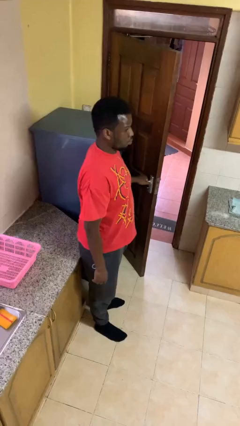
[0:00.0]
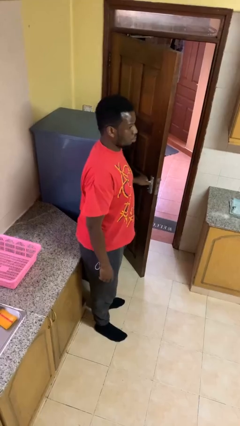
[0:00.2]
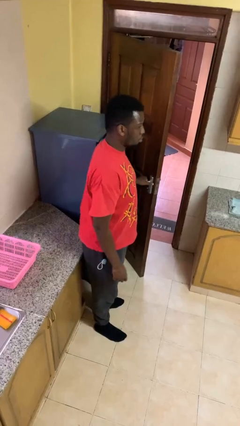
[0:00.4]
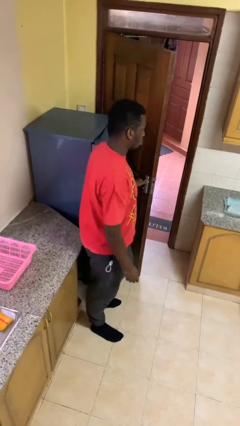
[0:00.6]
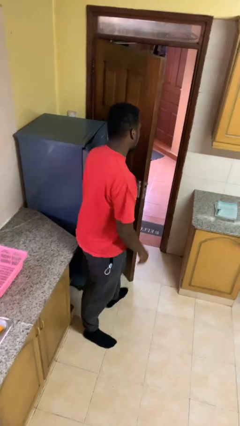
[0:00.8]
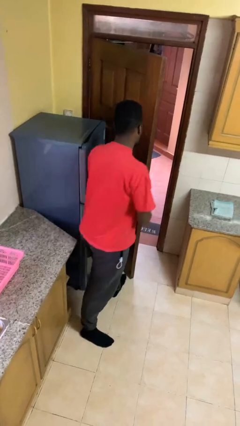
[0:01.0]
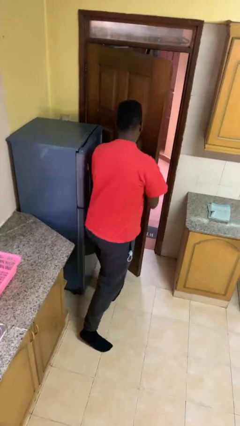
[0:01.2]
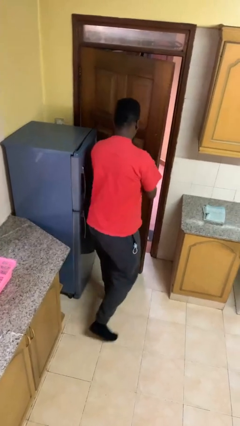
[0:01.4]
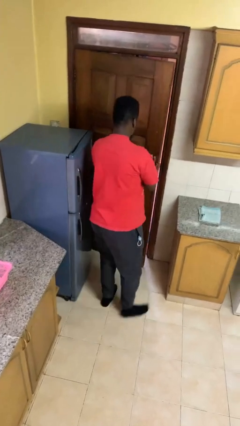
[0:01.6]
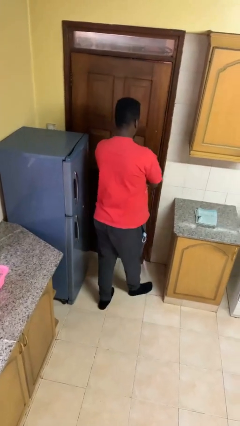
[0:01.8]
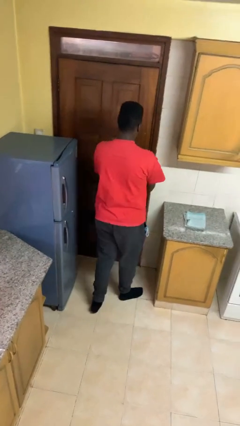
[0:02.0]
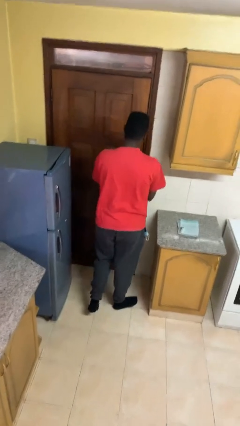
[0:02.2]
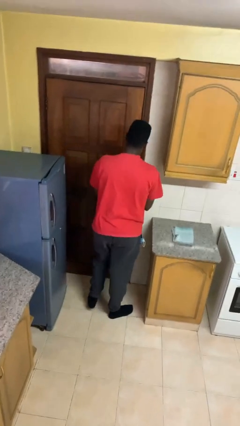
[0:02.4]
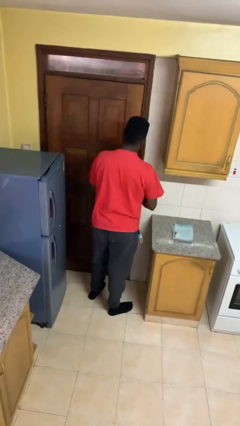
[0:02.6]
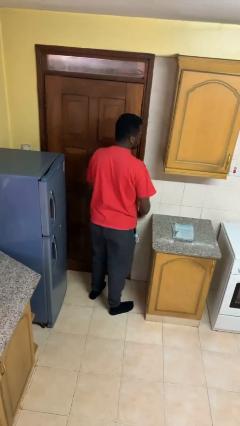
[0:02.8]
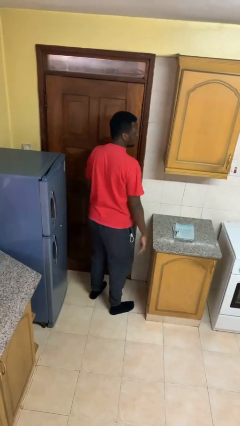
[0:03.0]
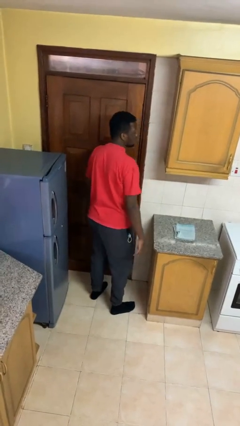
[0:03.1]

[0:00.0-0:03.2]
person closes facility door

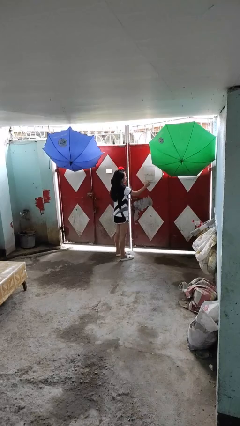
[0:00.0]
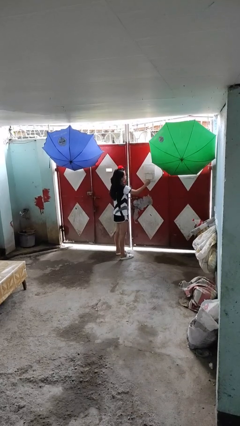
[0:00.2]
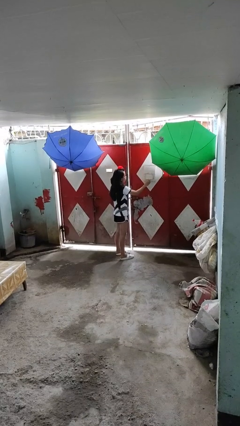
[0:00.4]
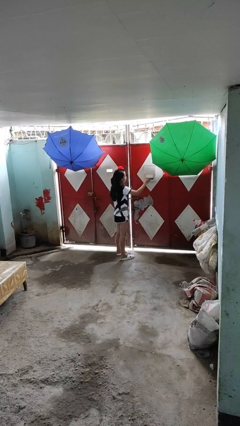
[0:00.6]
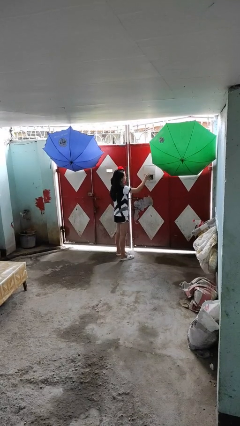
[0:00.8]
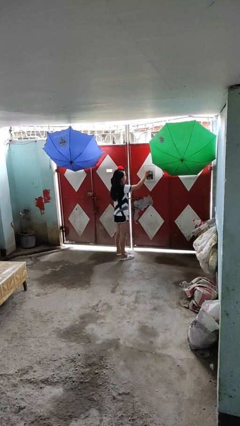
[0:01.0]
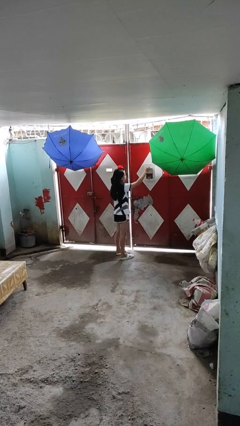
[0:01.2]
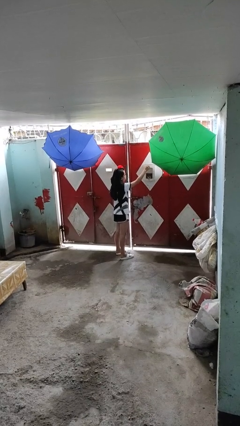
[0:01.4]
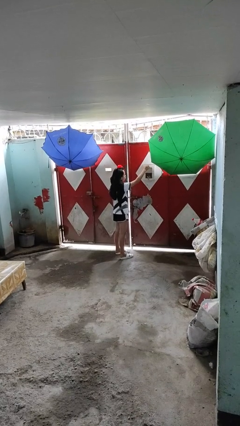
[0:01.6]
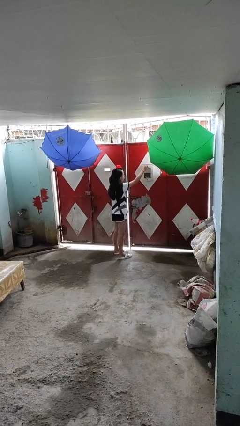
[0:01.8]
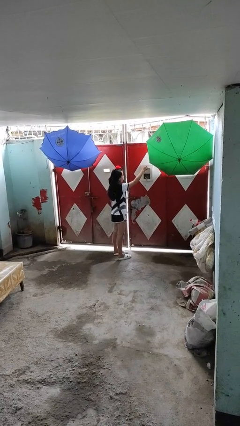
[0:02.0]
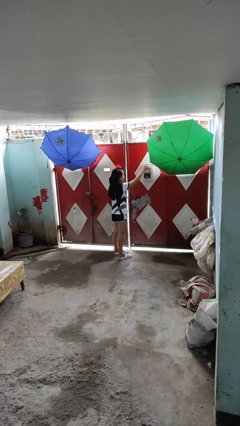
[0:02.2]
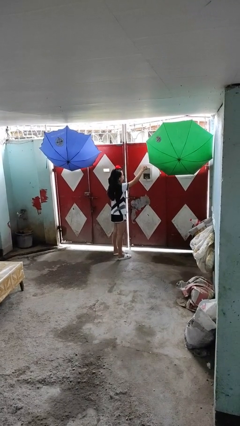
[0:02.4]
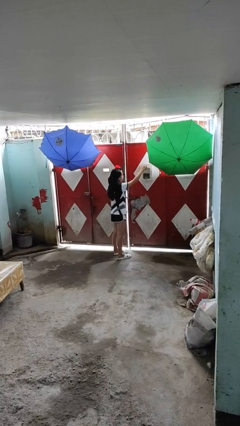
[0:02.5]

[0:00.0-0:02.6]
person opens mailbox

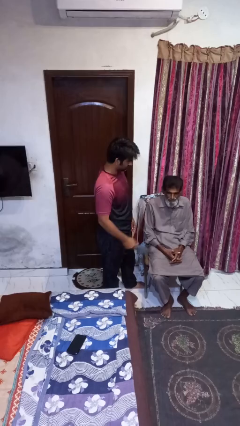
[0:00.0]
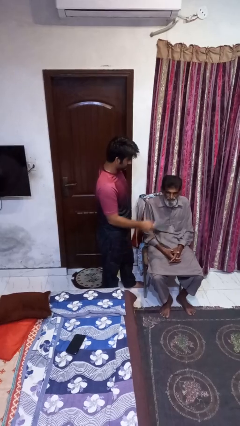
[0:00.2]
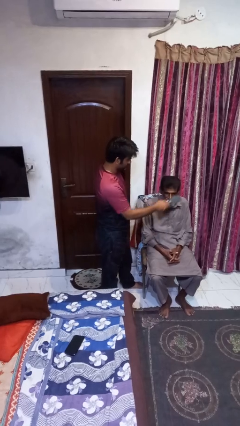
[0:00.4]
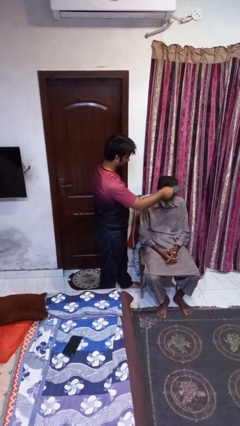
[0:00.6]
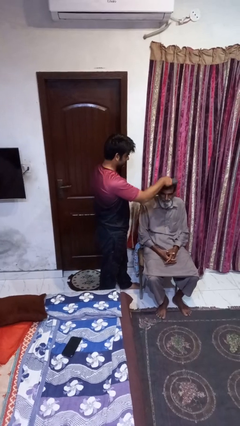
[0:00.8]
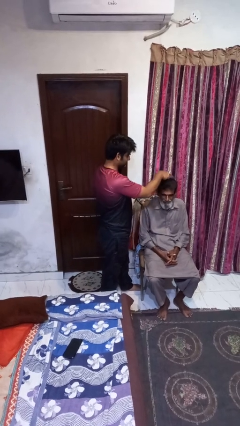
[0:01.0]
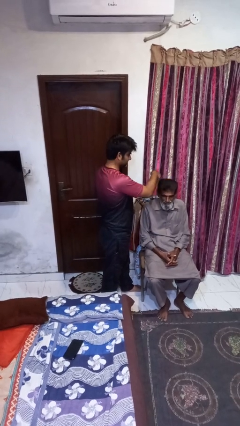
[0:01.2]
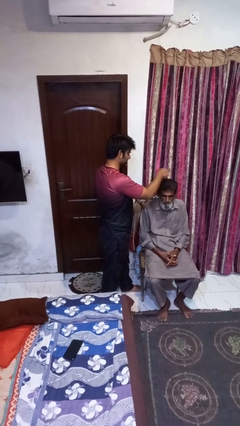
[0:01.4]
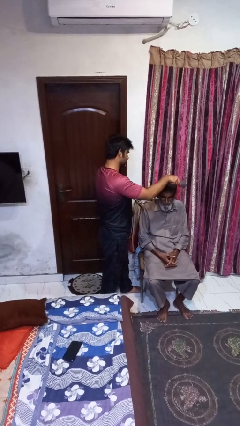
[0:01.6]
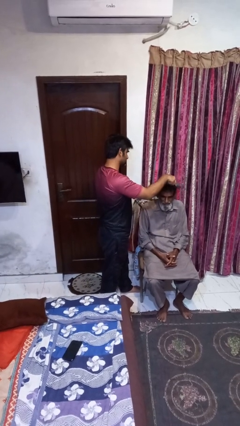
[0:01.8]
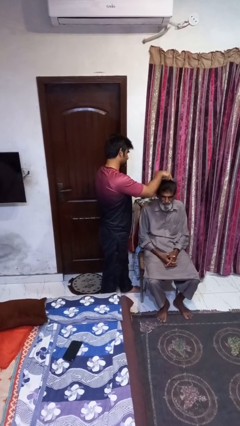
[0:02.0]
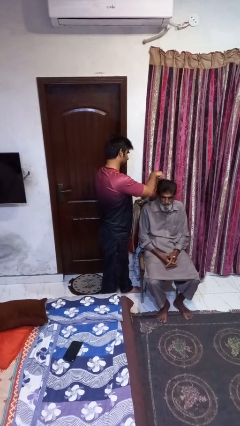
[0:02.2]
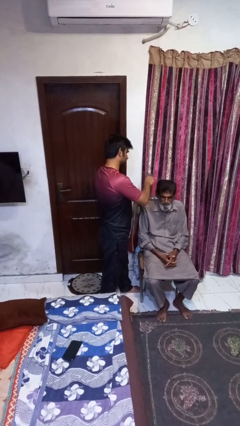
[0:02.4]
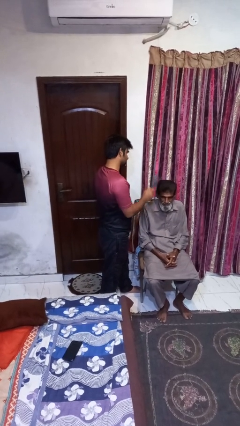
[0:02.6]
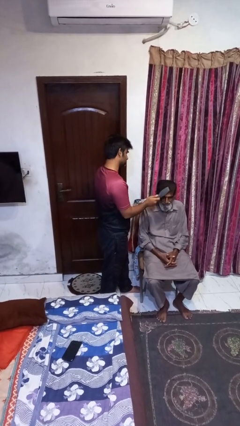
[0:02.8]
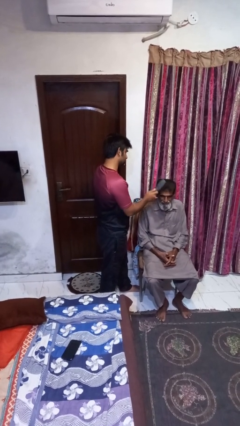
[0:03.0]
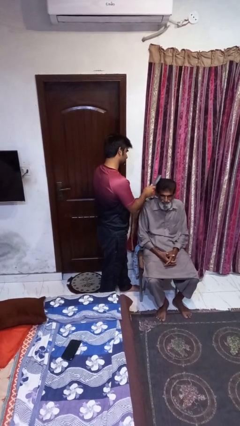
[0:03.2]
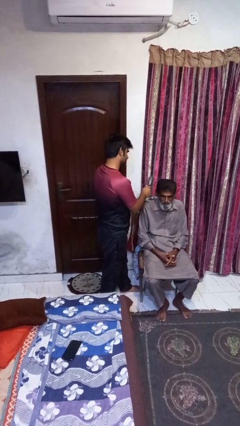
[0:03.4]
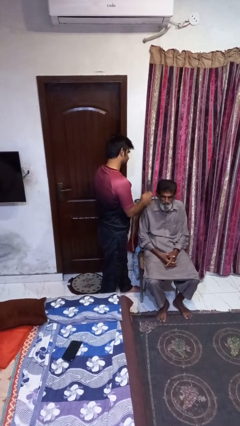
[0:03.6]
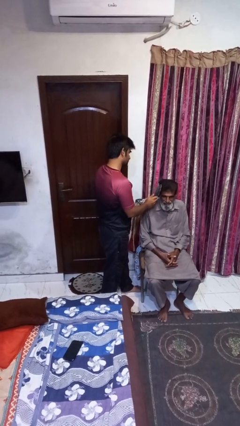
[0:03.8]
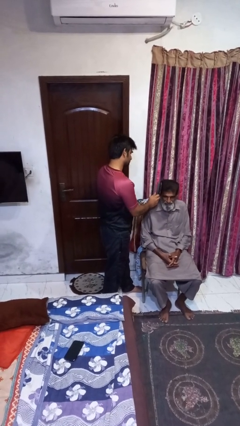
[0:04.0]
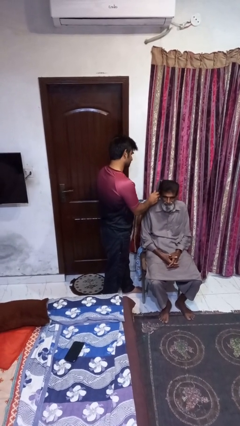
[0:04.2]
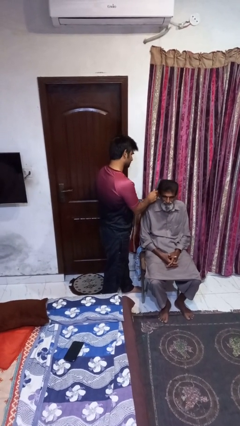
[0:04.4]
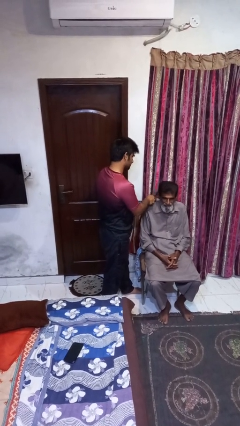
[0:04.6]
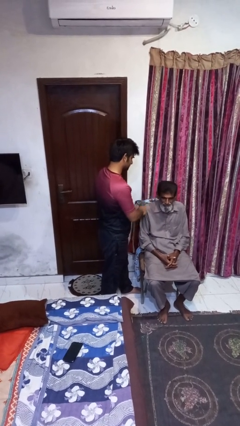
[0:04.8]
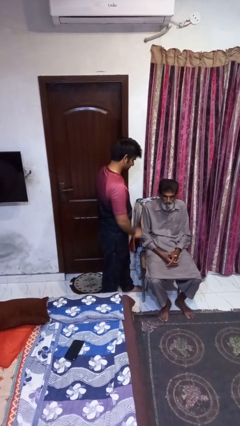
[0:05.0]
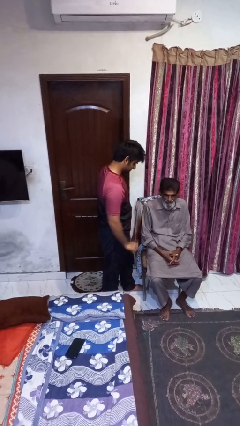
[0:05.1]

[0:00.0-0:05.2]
person brushes hair of person

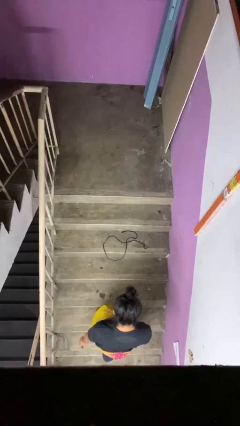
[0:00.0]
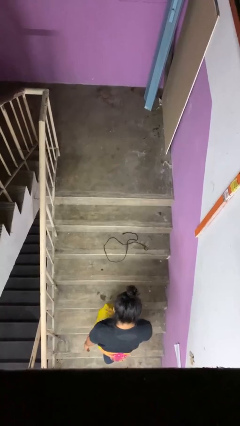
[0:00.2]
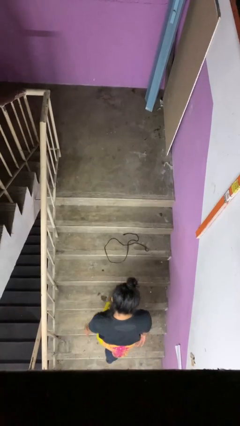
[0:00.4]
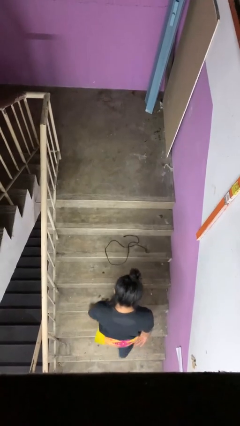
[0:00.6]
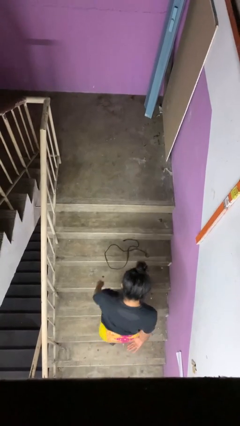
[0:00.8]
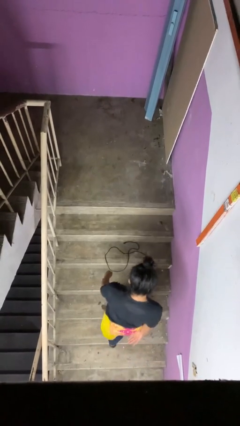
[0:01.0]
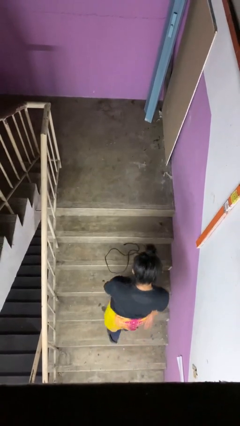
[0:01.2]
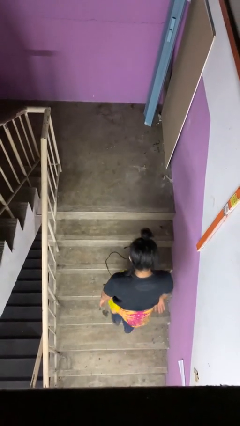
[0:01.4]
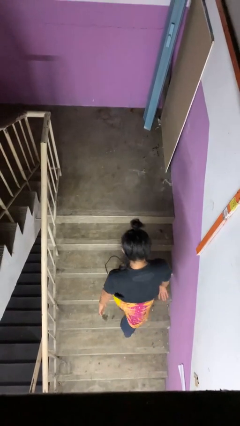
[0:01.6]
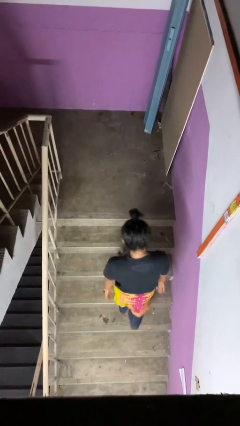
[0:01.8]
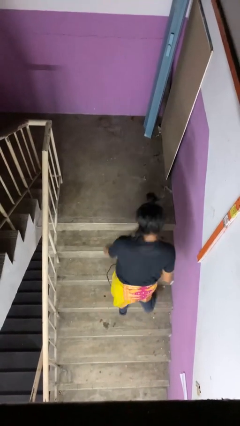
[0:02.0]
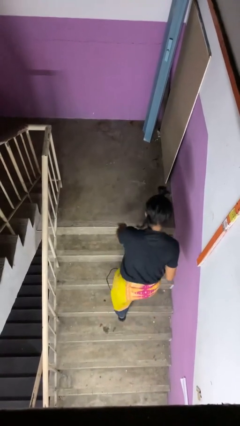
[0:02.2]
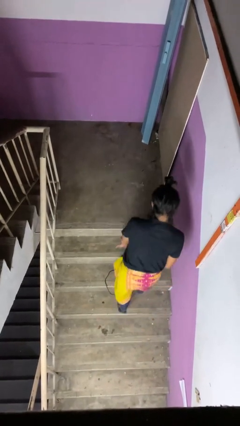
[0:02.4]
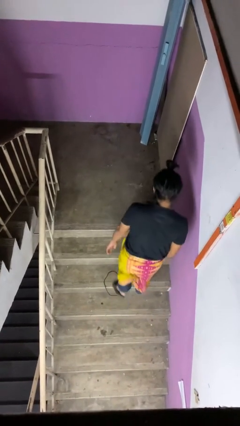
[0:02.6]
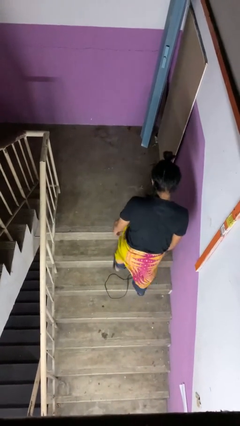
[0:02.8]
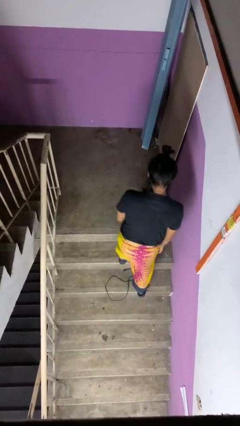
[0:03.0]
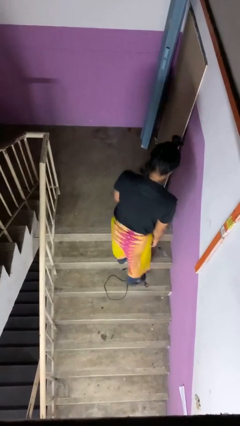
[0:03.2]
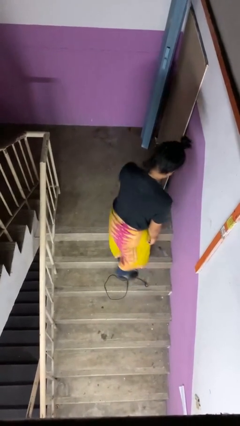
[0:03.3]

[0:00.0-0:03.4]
person climbs up stairs

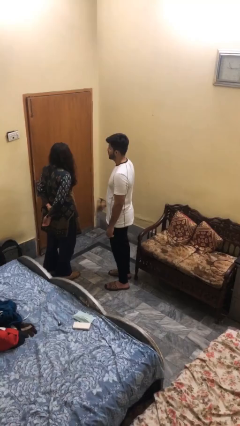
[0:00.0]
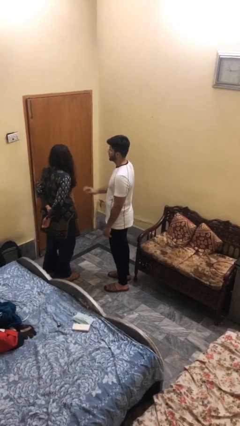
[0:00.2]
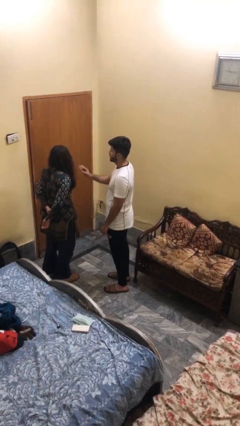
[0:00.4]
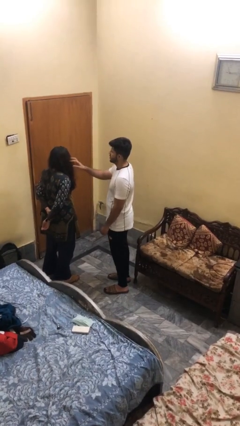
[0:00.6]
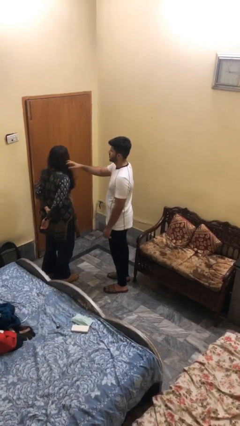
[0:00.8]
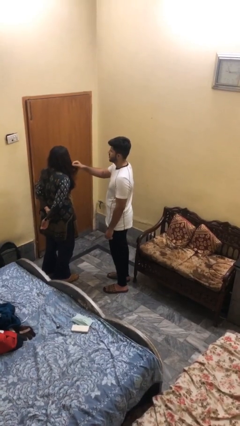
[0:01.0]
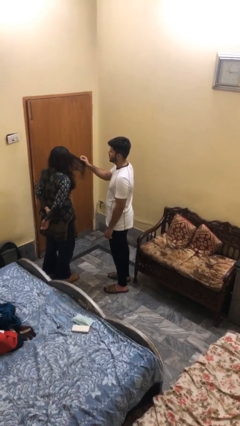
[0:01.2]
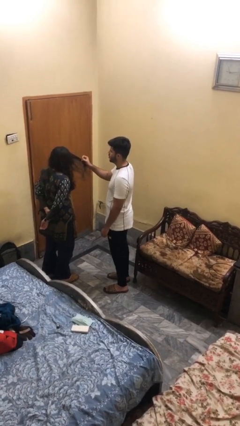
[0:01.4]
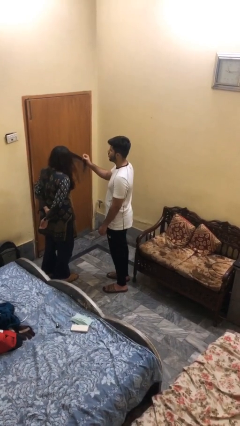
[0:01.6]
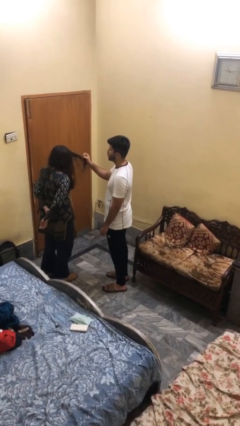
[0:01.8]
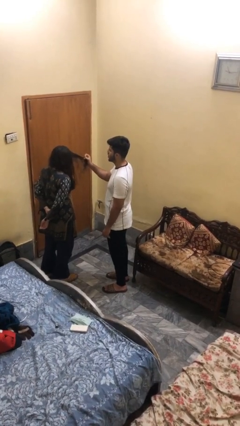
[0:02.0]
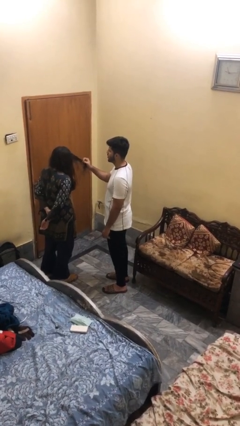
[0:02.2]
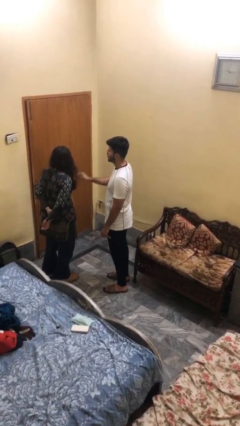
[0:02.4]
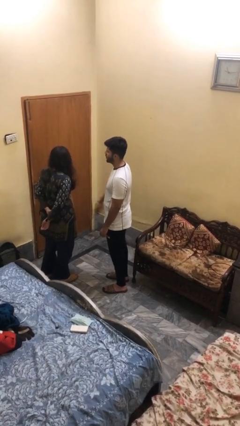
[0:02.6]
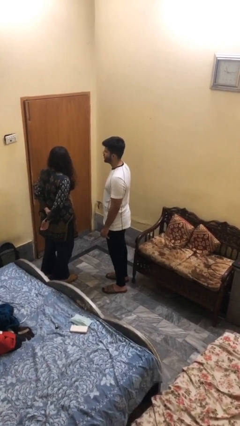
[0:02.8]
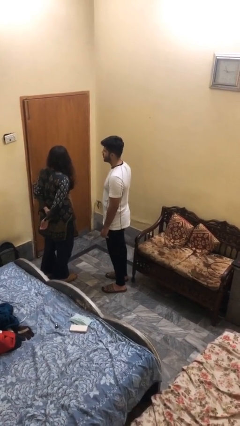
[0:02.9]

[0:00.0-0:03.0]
person grabs person by hair
